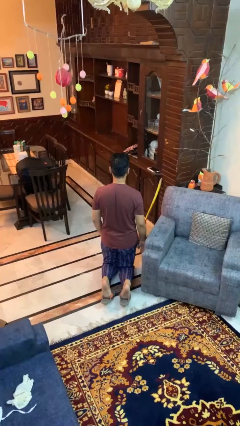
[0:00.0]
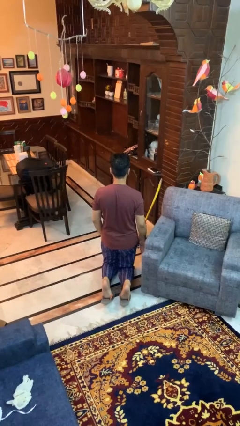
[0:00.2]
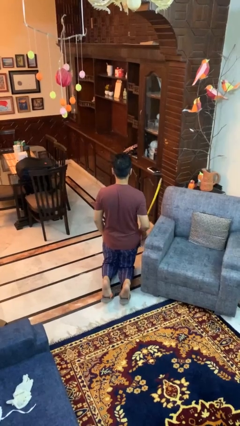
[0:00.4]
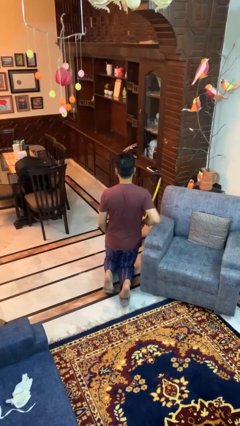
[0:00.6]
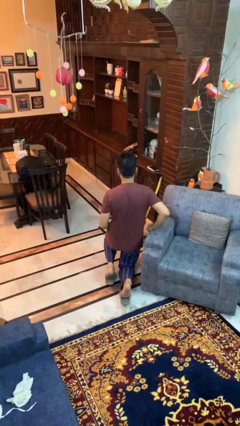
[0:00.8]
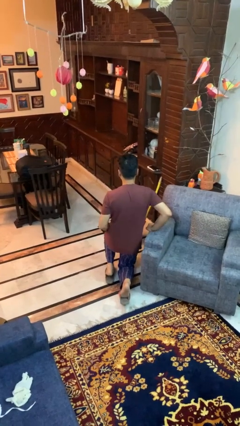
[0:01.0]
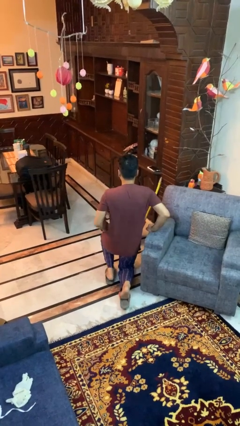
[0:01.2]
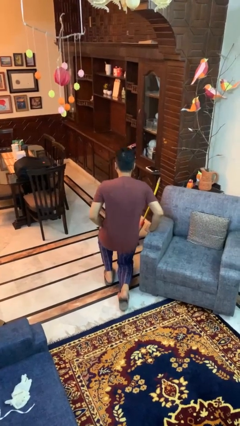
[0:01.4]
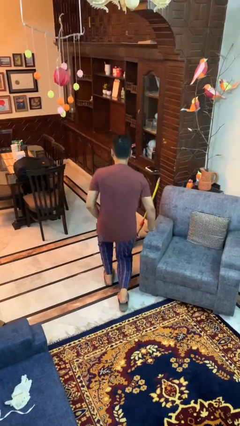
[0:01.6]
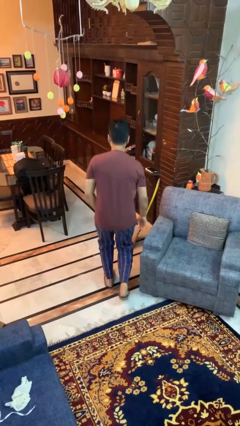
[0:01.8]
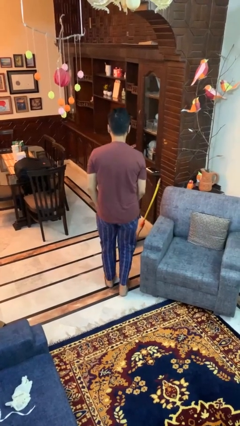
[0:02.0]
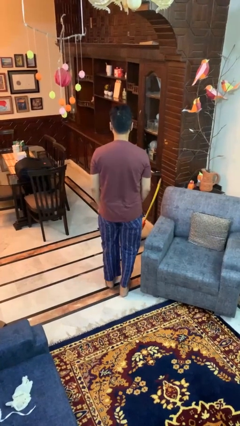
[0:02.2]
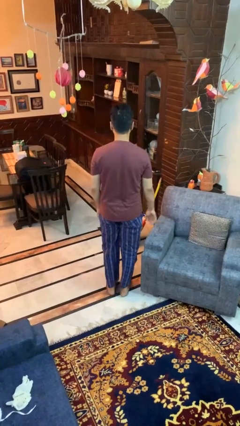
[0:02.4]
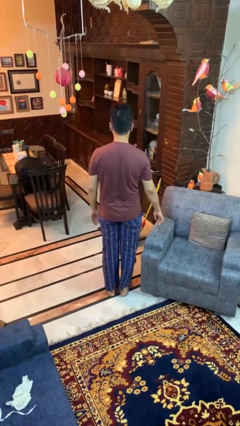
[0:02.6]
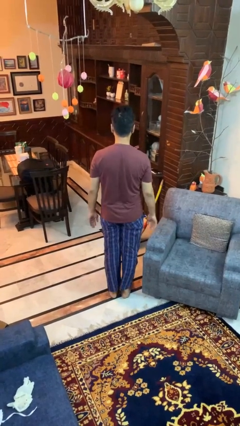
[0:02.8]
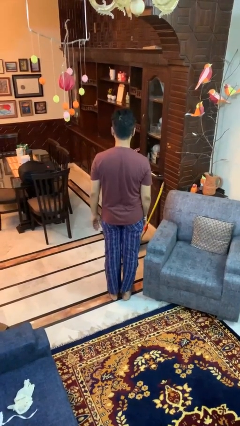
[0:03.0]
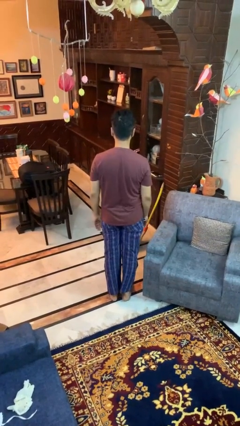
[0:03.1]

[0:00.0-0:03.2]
person stands up from floor

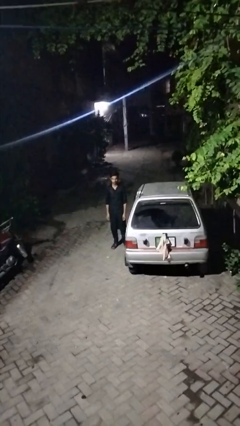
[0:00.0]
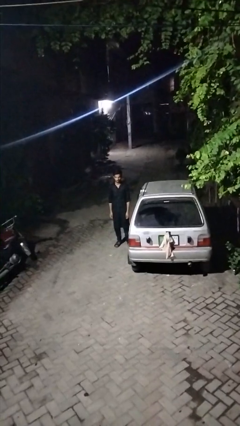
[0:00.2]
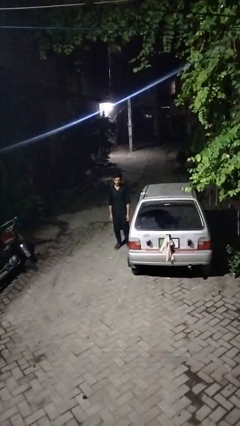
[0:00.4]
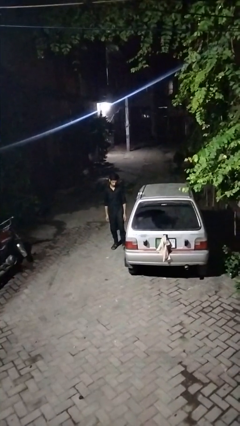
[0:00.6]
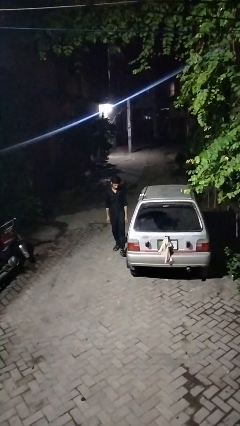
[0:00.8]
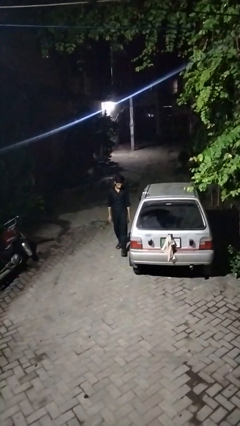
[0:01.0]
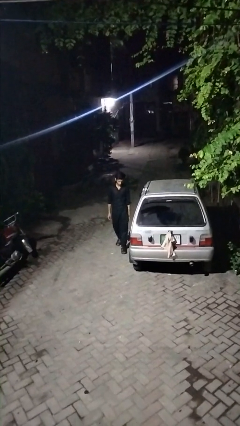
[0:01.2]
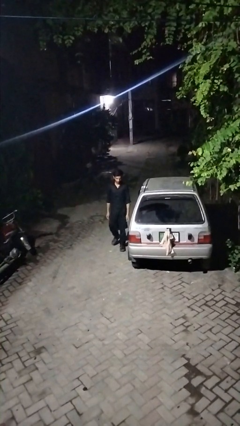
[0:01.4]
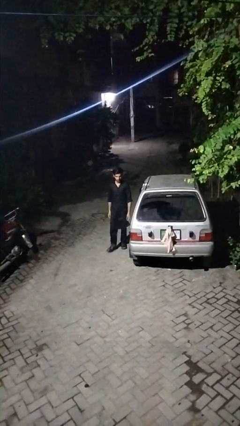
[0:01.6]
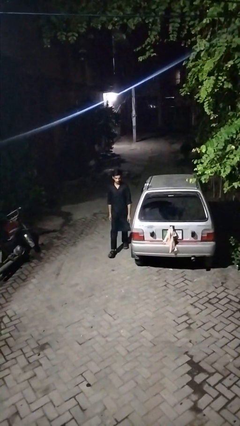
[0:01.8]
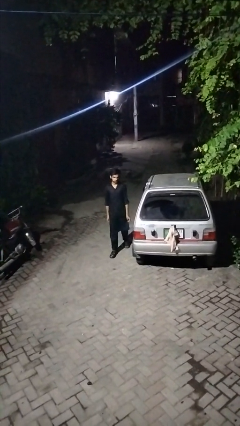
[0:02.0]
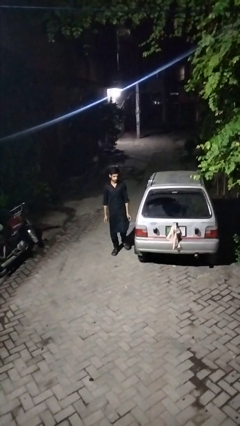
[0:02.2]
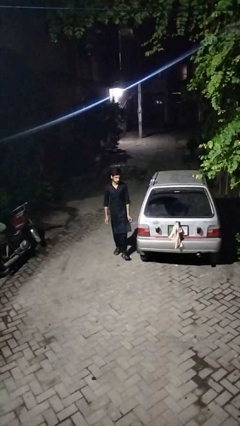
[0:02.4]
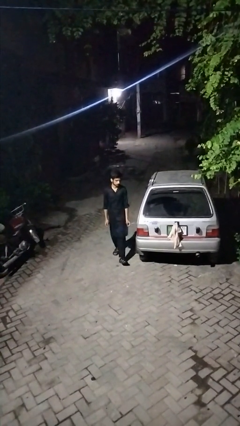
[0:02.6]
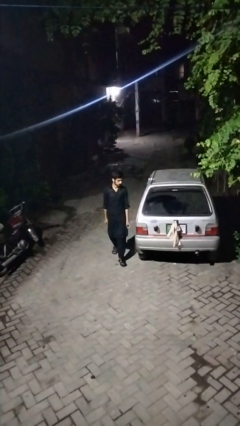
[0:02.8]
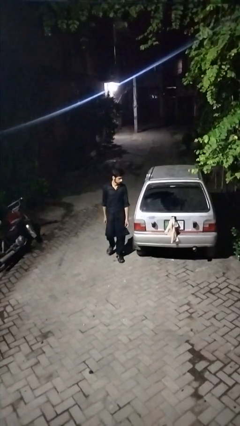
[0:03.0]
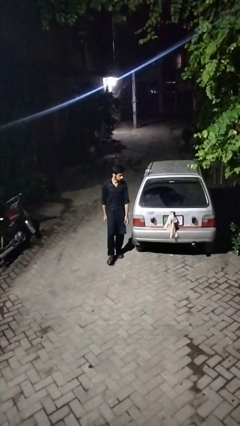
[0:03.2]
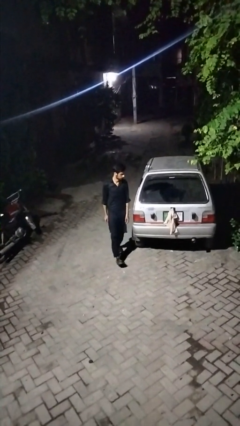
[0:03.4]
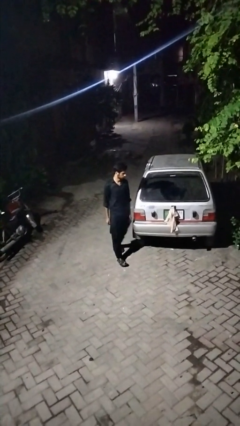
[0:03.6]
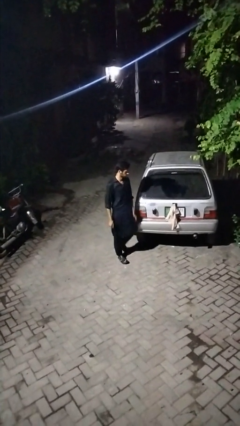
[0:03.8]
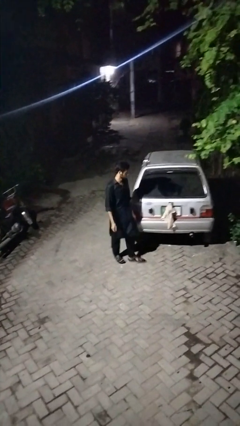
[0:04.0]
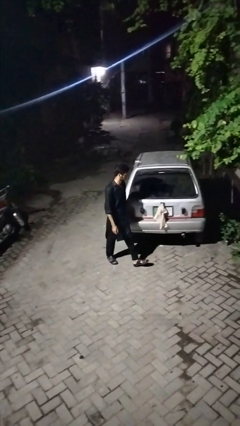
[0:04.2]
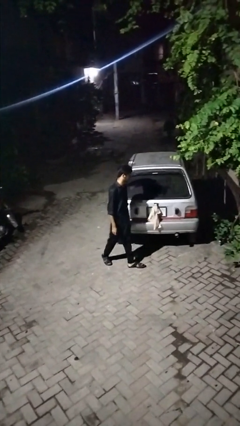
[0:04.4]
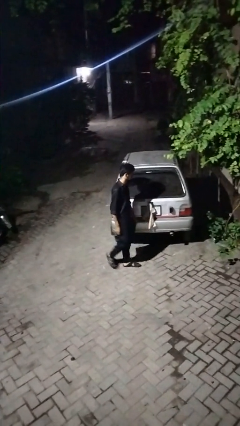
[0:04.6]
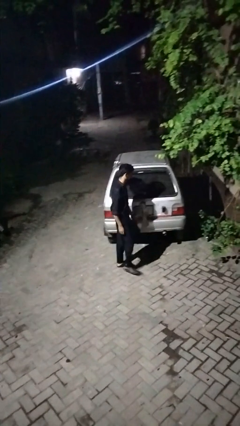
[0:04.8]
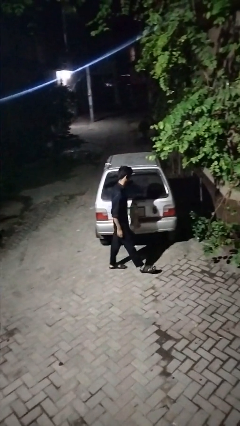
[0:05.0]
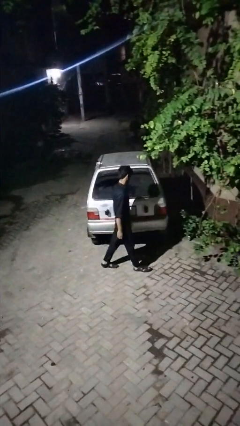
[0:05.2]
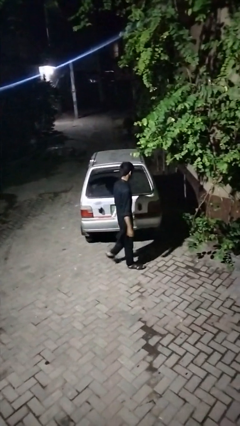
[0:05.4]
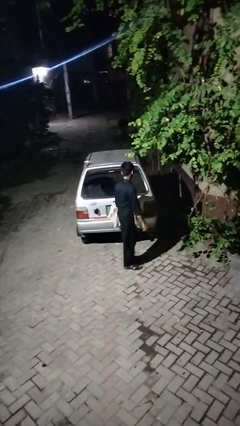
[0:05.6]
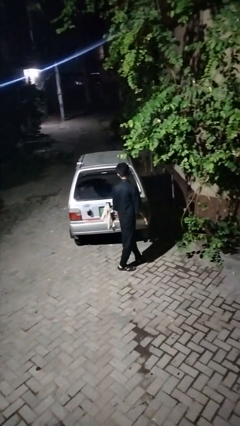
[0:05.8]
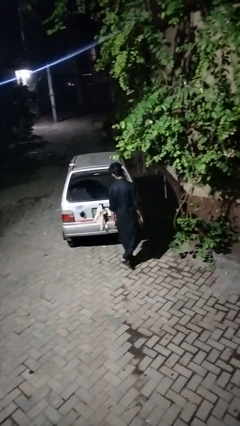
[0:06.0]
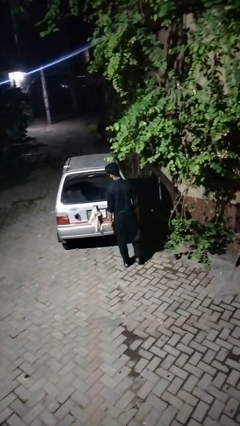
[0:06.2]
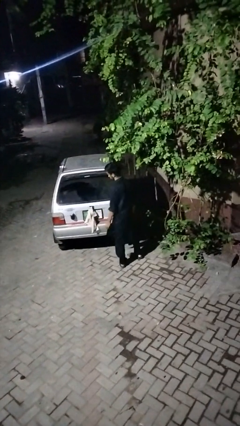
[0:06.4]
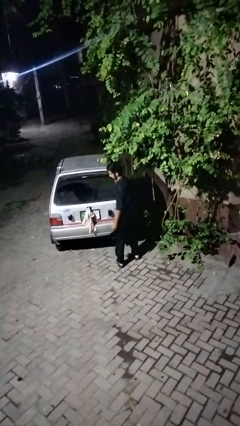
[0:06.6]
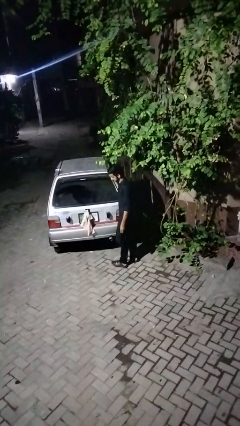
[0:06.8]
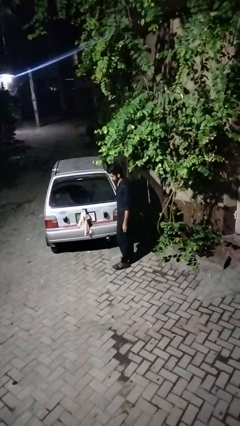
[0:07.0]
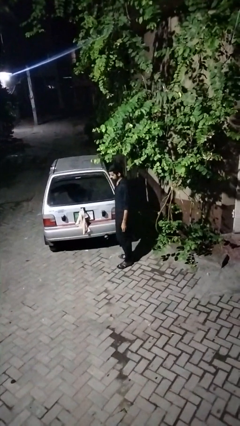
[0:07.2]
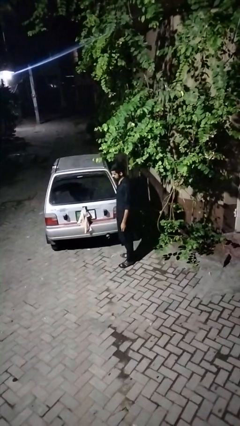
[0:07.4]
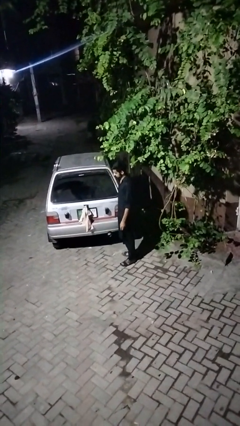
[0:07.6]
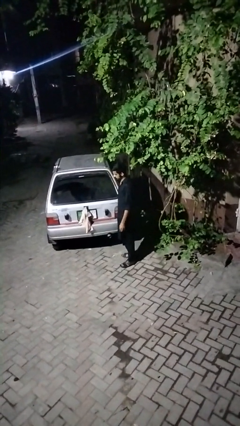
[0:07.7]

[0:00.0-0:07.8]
person walks around car

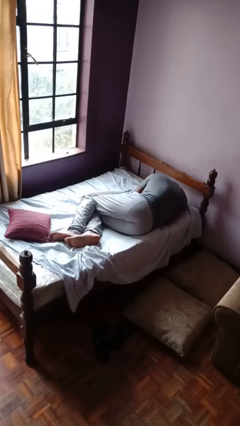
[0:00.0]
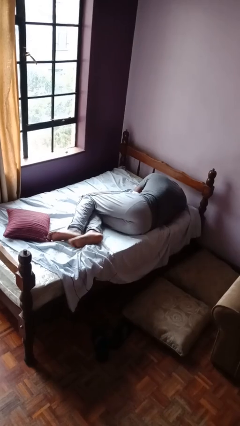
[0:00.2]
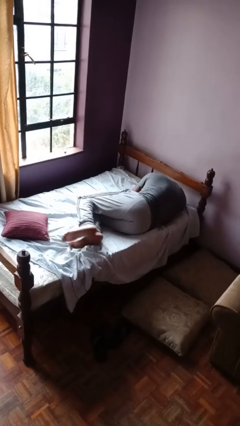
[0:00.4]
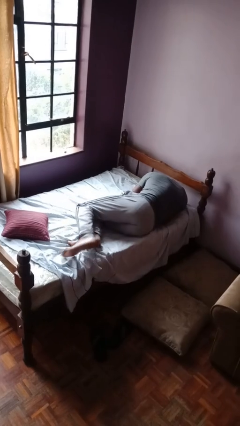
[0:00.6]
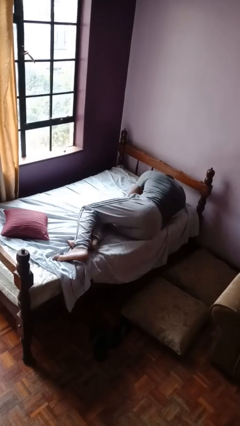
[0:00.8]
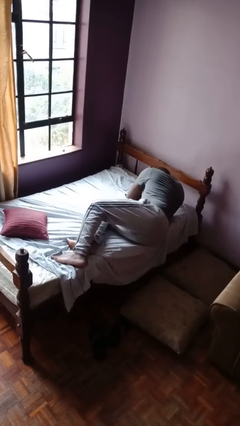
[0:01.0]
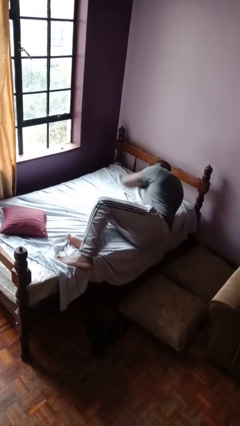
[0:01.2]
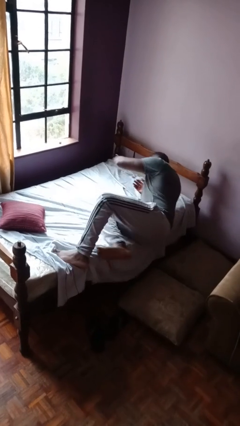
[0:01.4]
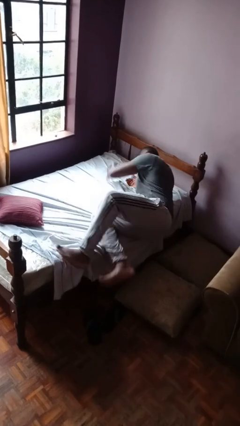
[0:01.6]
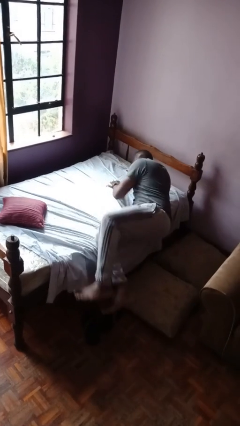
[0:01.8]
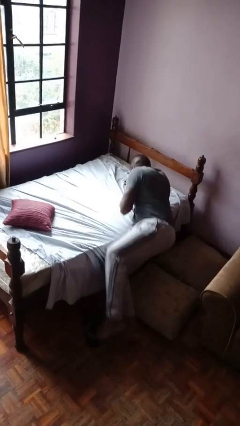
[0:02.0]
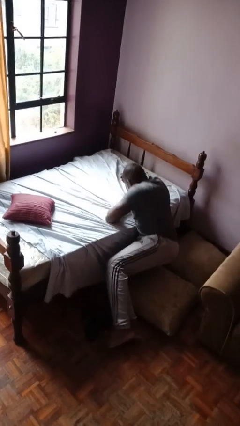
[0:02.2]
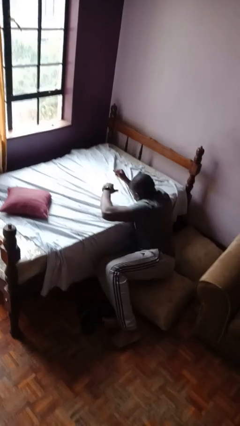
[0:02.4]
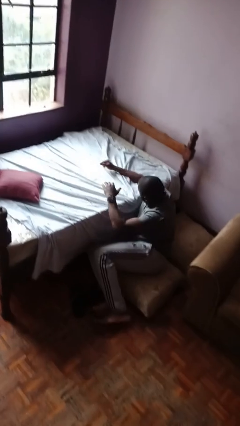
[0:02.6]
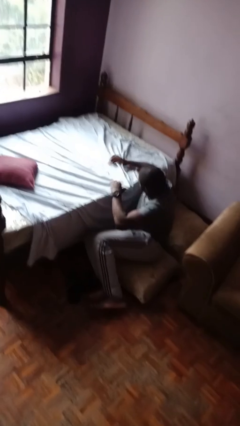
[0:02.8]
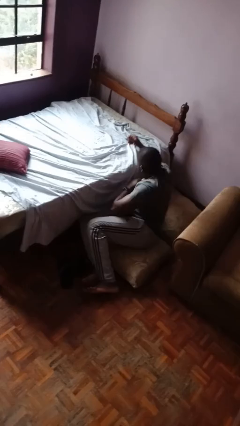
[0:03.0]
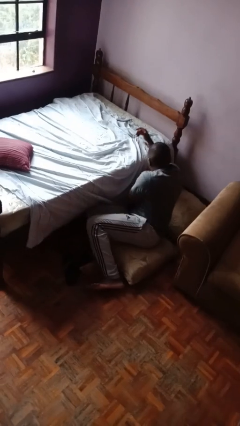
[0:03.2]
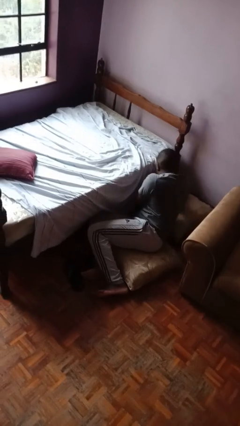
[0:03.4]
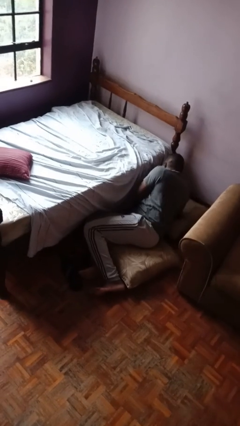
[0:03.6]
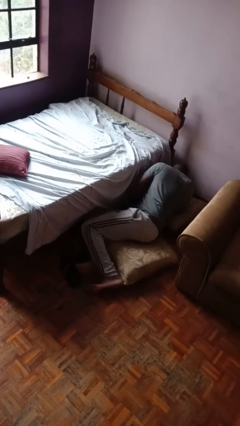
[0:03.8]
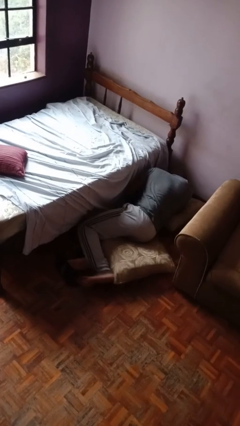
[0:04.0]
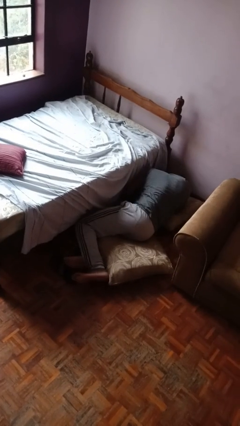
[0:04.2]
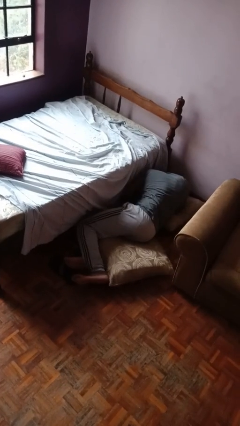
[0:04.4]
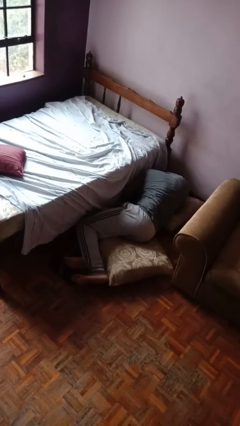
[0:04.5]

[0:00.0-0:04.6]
person falls from bed

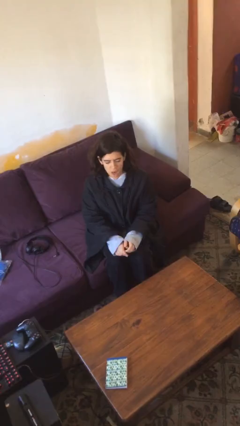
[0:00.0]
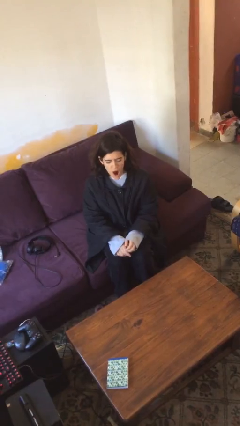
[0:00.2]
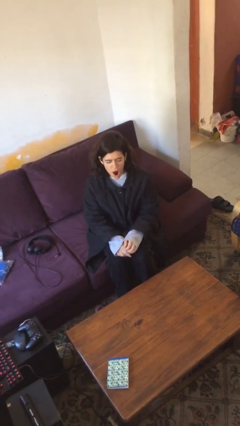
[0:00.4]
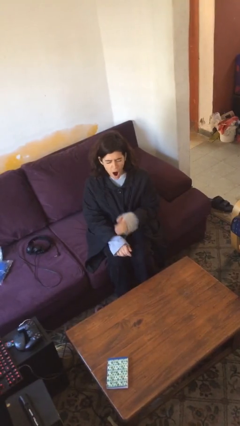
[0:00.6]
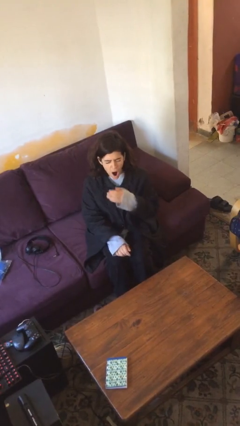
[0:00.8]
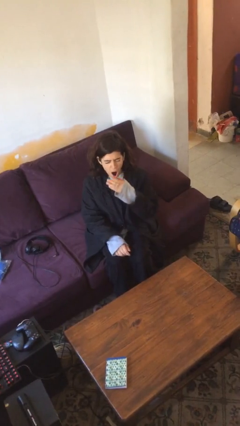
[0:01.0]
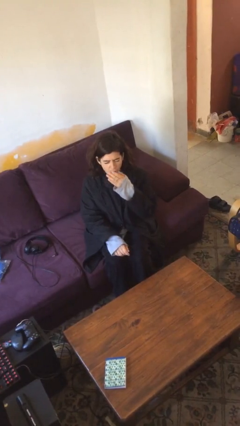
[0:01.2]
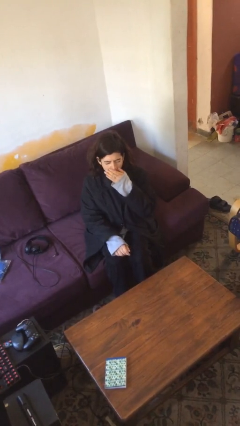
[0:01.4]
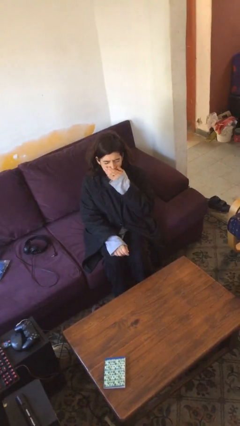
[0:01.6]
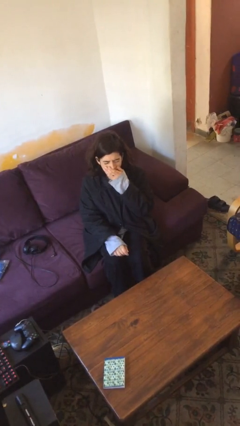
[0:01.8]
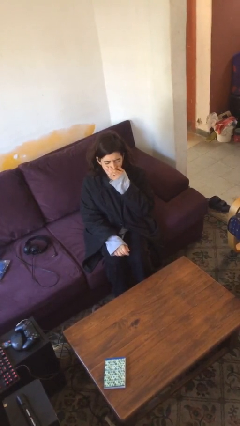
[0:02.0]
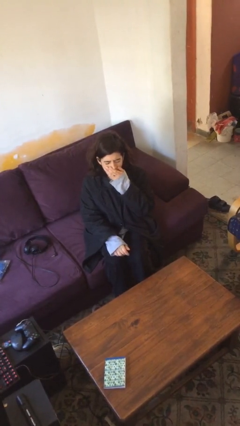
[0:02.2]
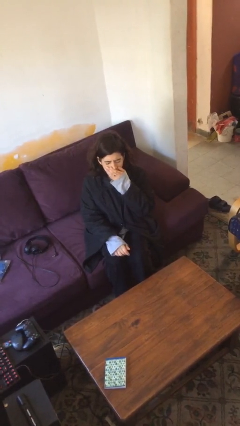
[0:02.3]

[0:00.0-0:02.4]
person yawns
